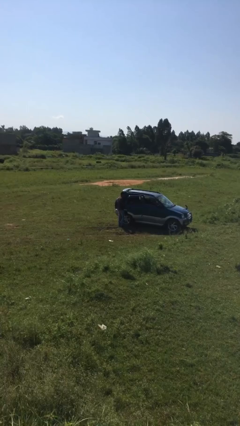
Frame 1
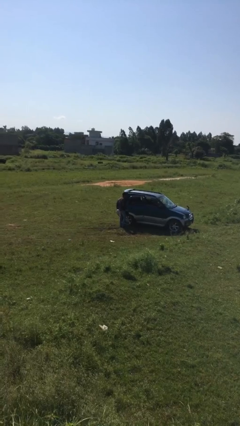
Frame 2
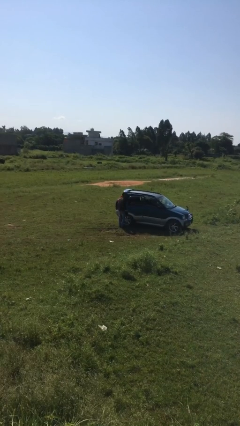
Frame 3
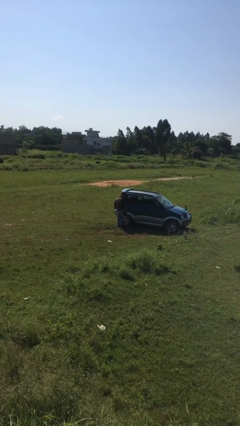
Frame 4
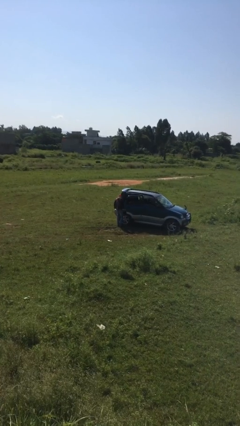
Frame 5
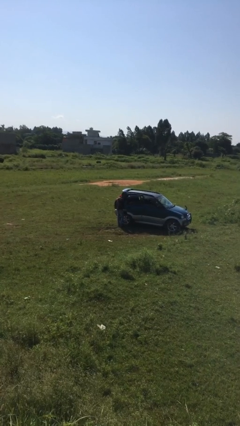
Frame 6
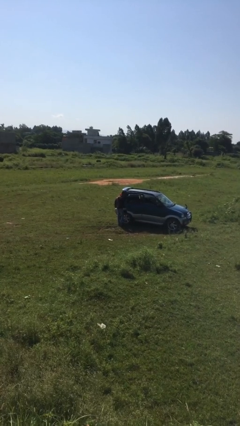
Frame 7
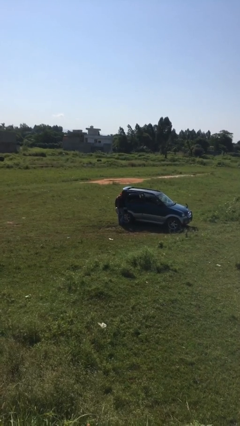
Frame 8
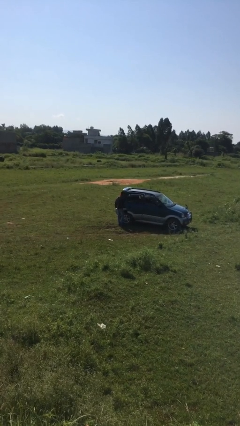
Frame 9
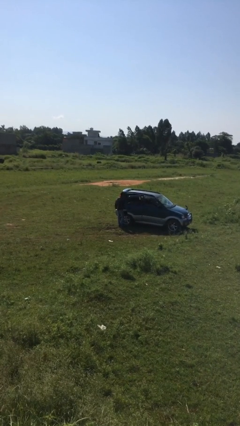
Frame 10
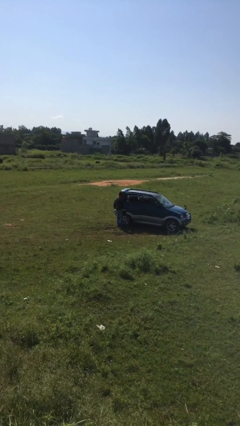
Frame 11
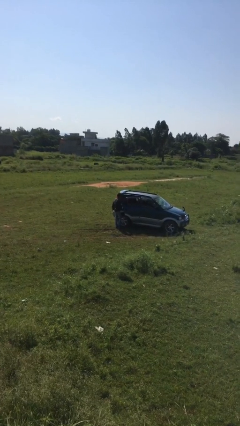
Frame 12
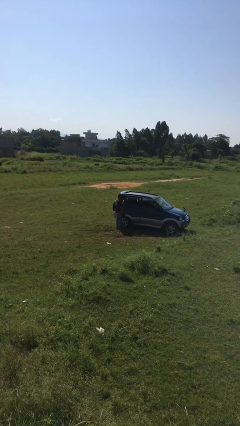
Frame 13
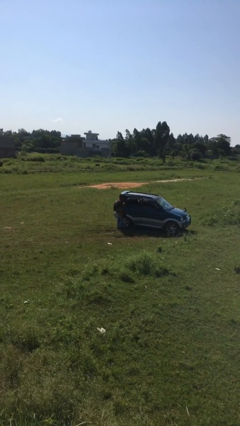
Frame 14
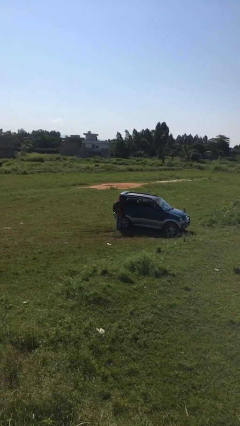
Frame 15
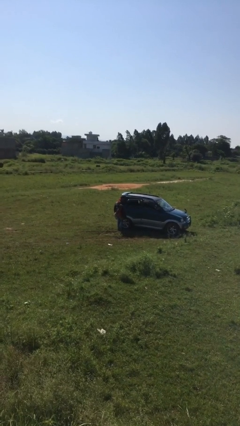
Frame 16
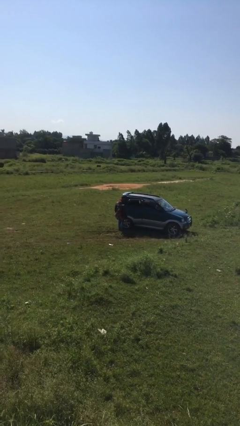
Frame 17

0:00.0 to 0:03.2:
person unloads car

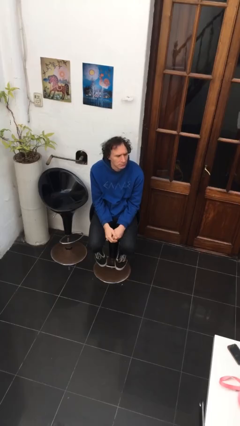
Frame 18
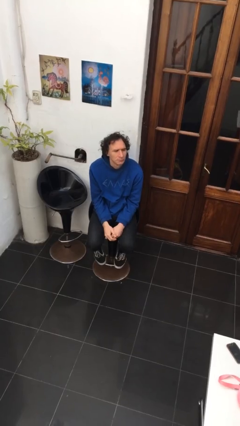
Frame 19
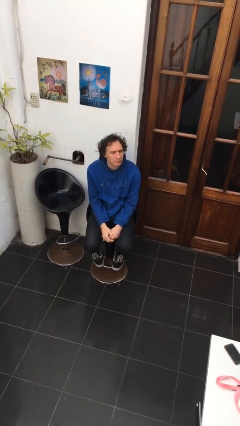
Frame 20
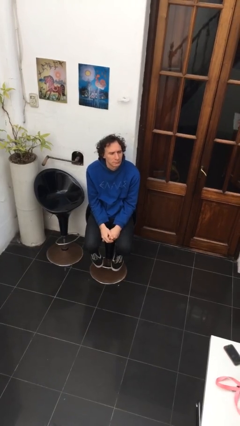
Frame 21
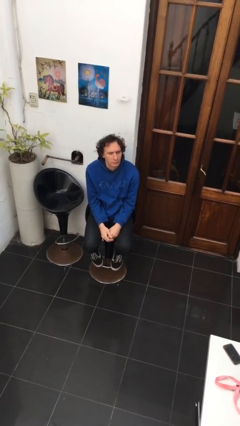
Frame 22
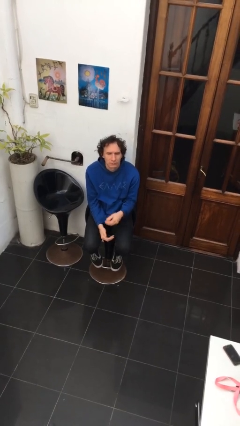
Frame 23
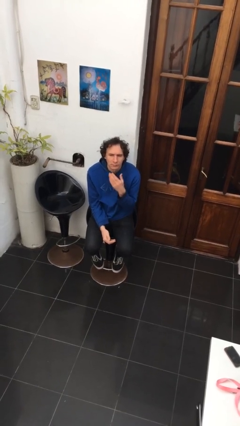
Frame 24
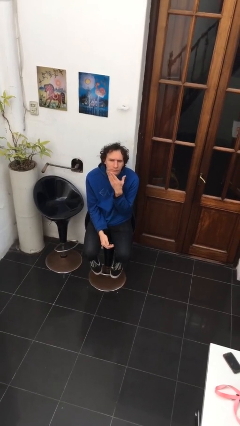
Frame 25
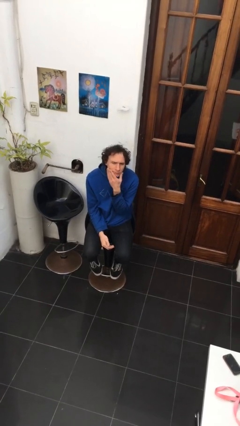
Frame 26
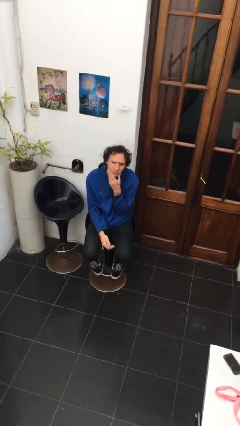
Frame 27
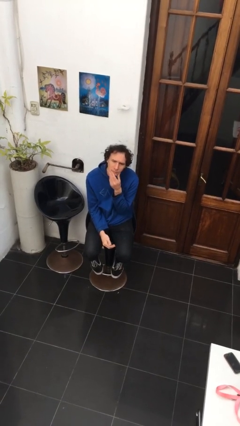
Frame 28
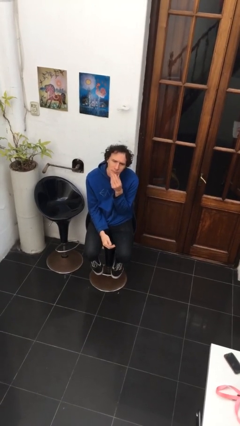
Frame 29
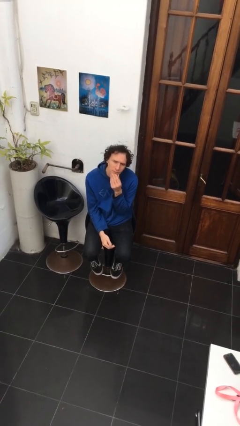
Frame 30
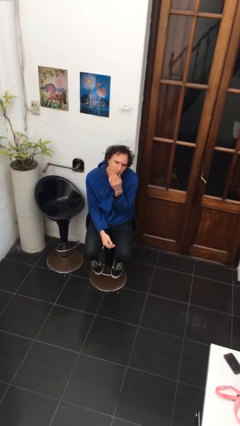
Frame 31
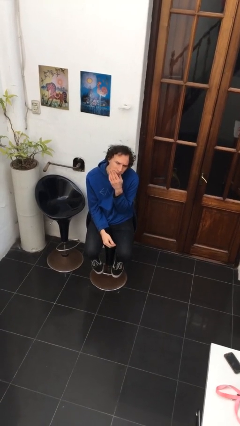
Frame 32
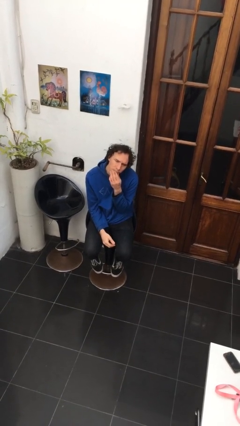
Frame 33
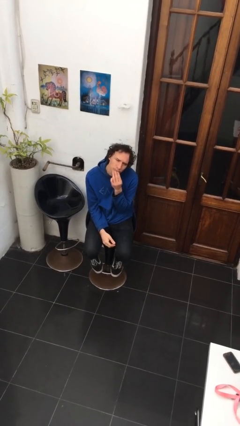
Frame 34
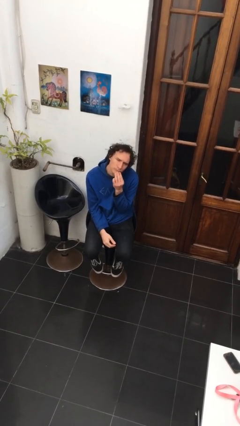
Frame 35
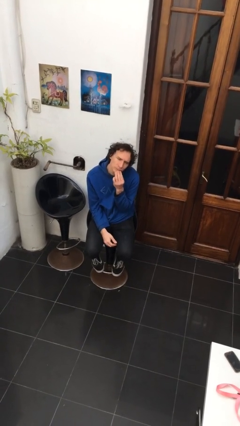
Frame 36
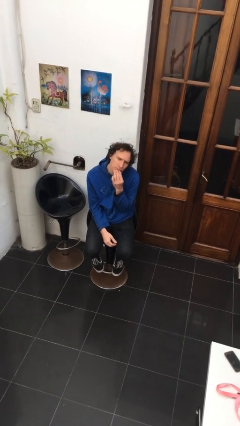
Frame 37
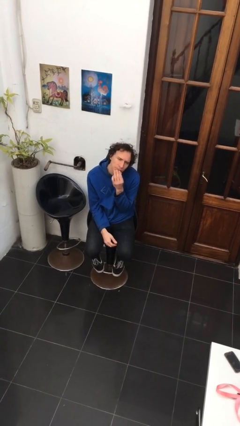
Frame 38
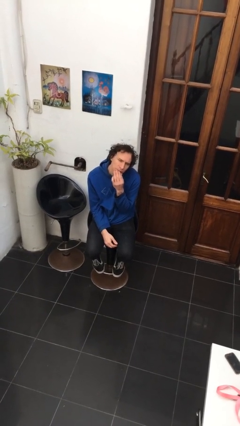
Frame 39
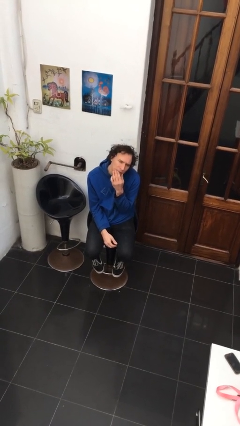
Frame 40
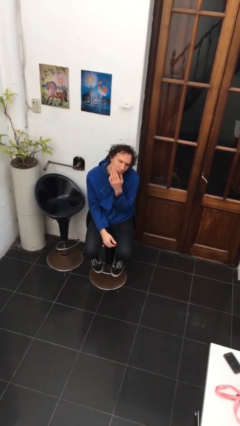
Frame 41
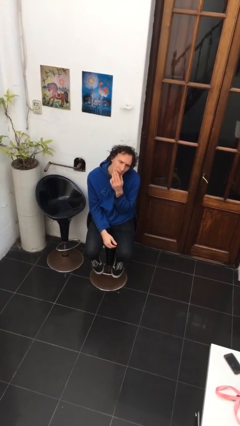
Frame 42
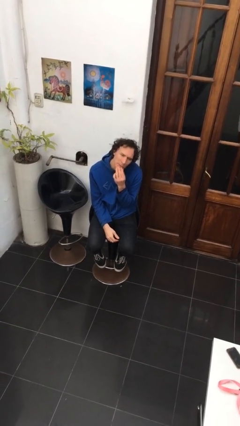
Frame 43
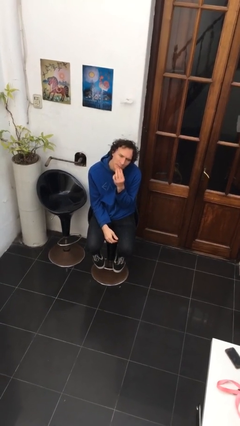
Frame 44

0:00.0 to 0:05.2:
person strokes chin

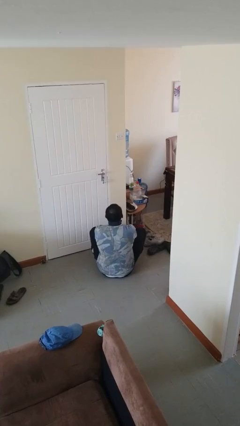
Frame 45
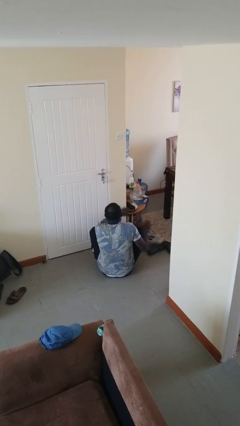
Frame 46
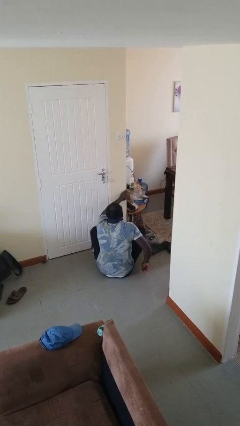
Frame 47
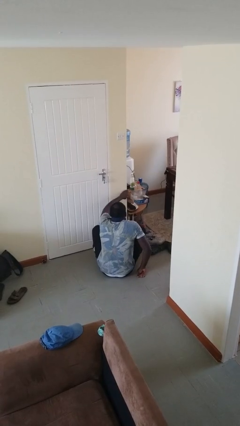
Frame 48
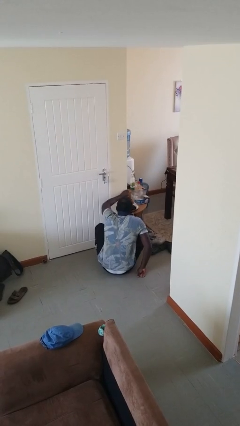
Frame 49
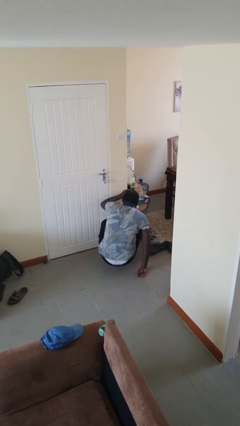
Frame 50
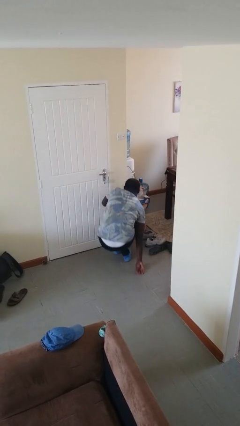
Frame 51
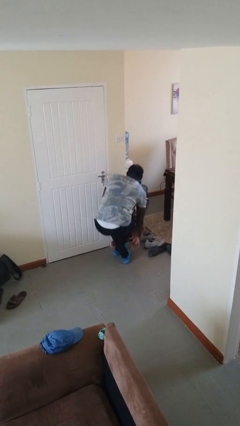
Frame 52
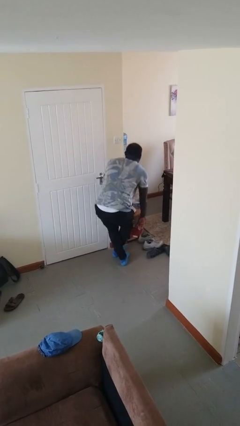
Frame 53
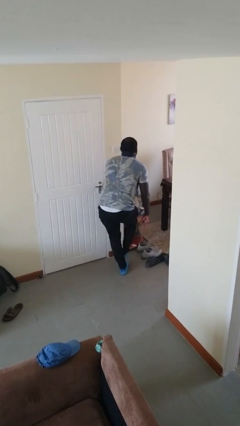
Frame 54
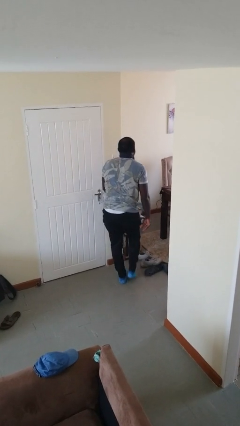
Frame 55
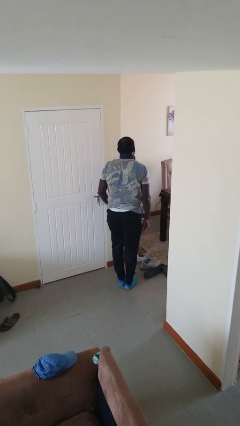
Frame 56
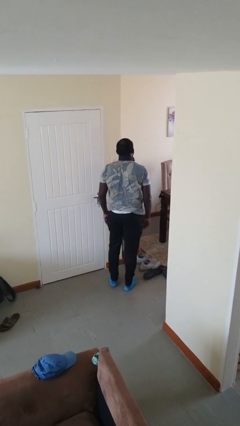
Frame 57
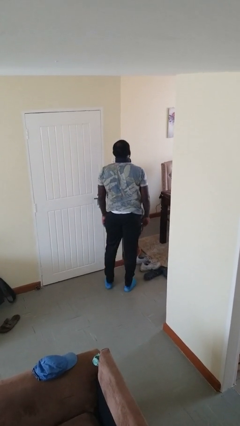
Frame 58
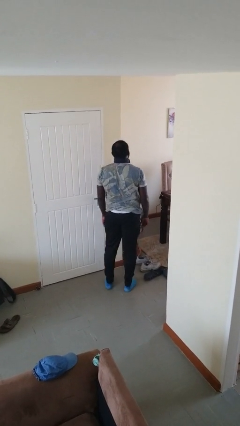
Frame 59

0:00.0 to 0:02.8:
person stands up from floor

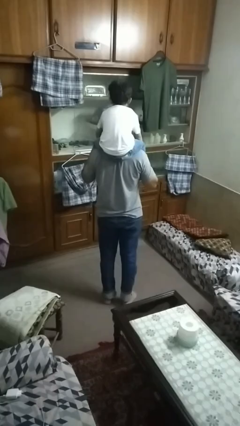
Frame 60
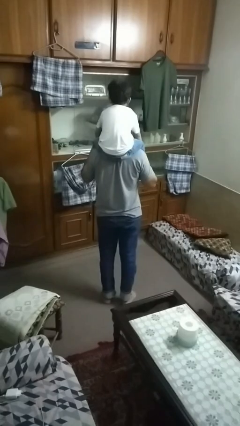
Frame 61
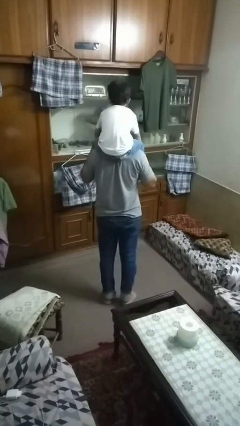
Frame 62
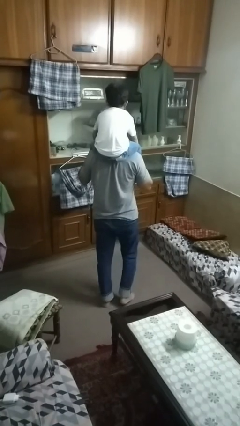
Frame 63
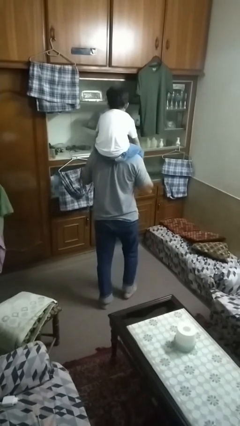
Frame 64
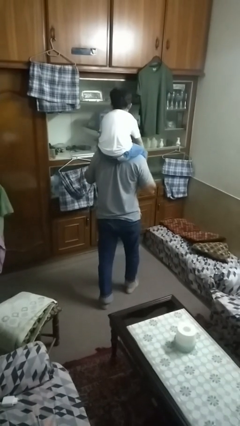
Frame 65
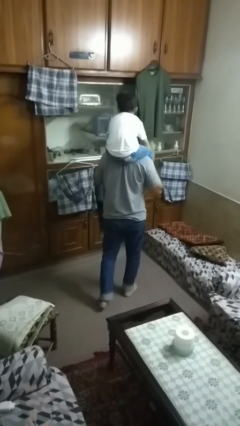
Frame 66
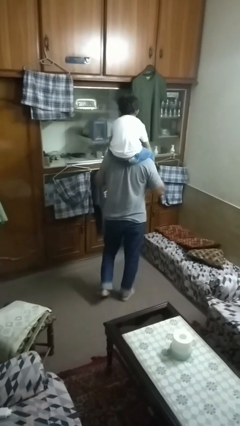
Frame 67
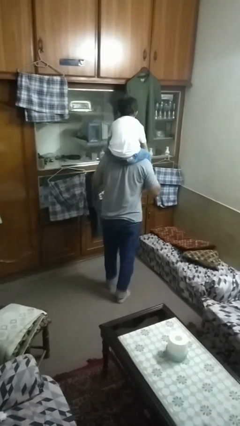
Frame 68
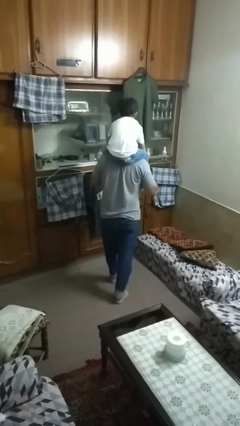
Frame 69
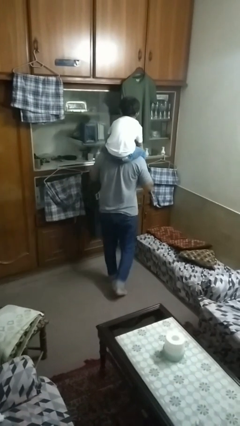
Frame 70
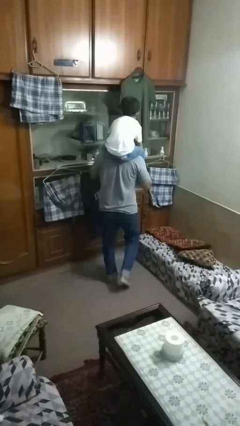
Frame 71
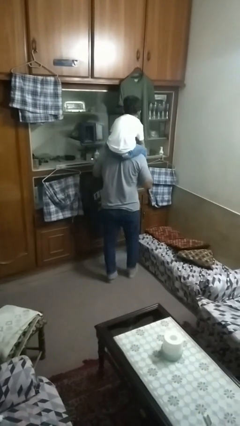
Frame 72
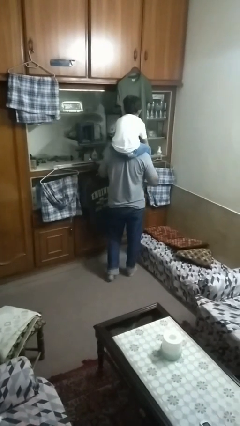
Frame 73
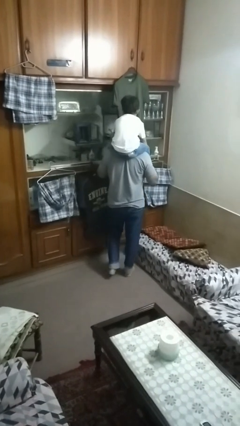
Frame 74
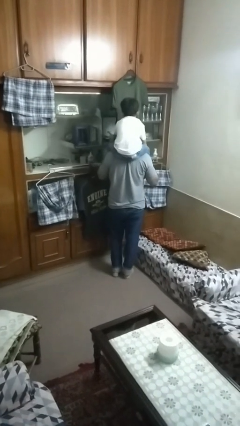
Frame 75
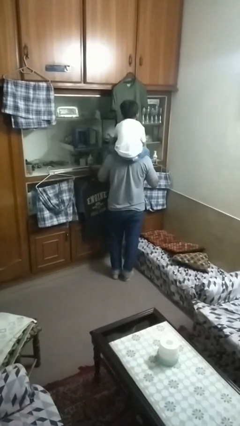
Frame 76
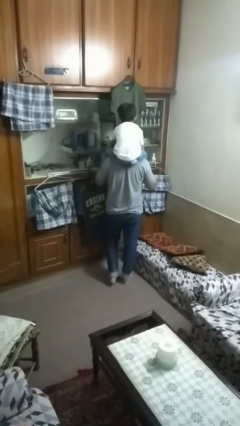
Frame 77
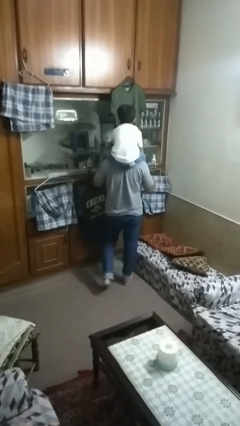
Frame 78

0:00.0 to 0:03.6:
person carries person on shoulders

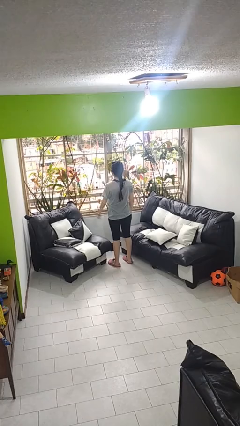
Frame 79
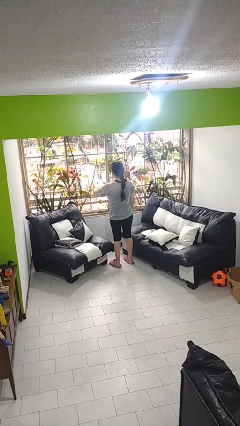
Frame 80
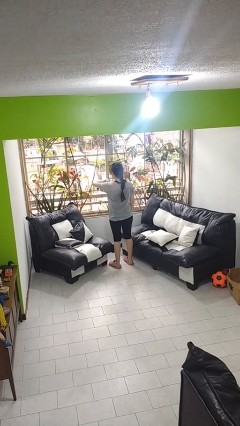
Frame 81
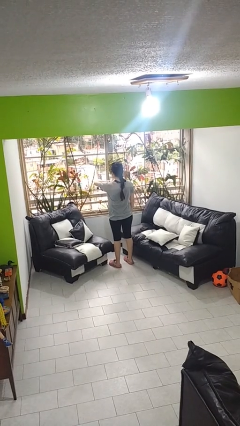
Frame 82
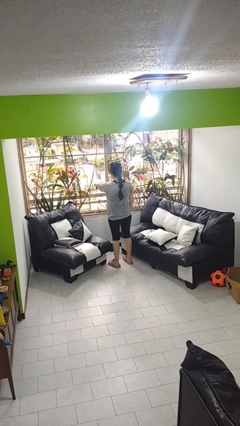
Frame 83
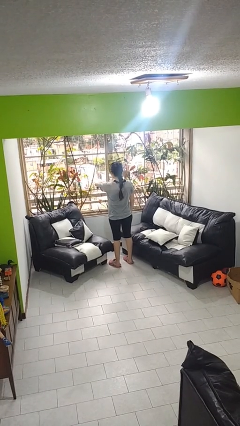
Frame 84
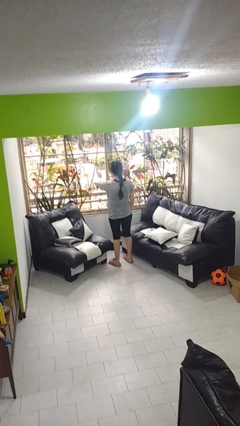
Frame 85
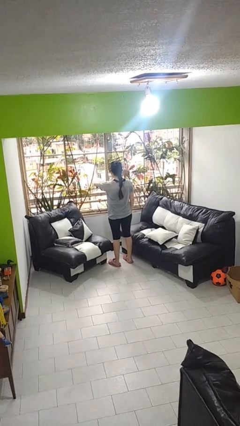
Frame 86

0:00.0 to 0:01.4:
person looks at wristwatch

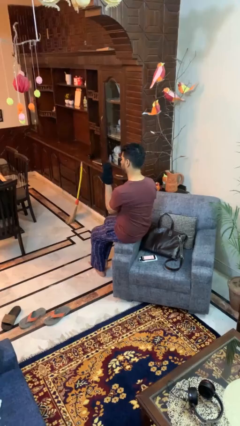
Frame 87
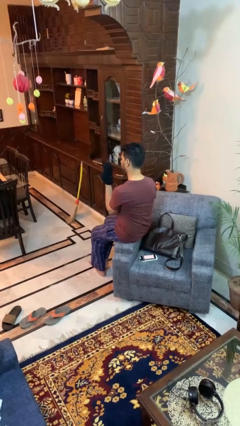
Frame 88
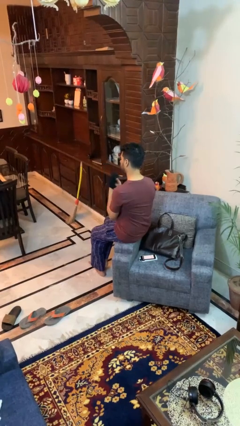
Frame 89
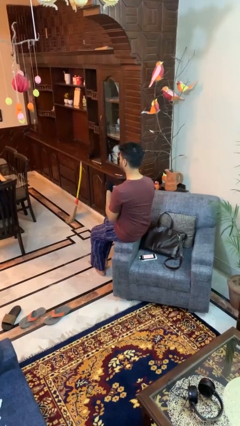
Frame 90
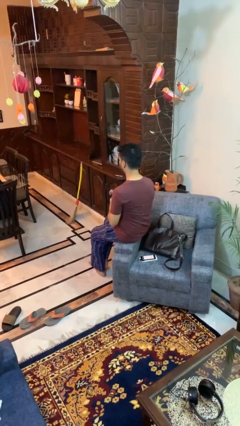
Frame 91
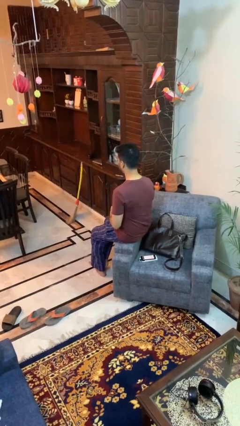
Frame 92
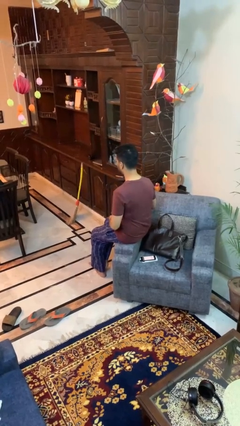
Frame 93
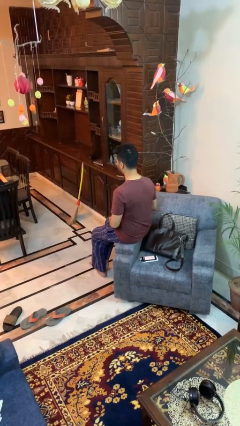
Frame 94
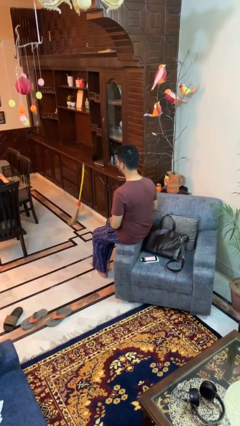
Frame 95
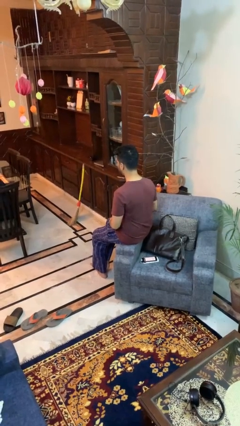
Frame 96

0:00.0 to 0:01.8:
person takes off gloves
